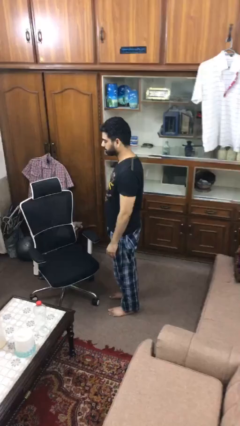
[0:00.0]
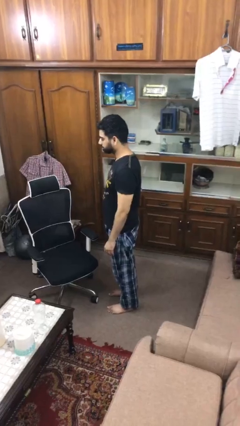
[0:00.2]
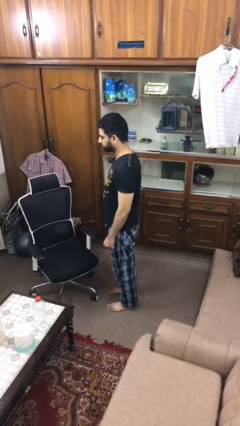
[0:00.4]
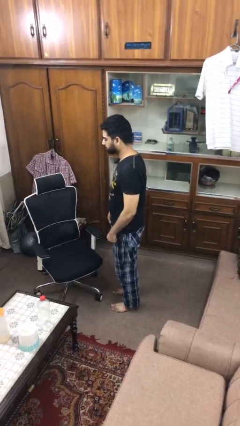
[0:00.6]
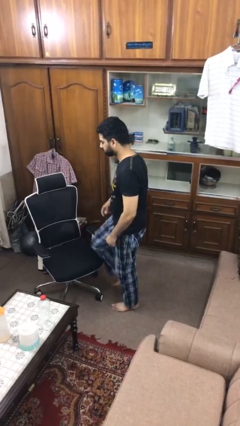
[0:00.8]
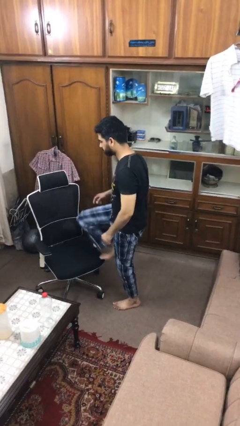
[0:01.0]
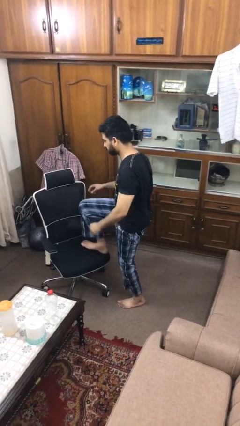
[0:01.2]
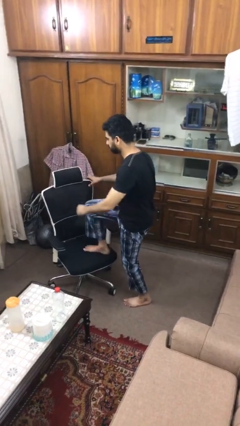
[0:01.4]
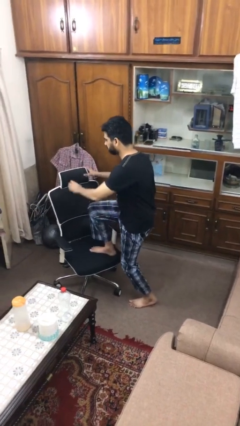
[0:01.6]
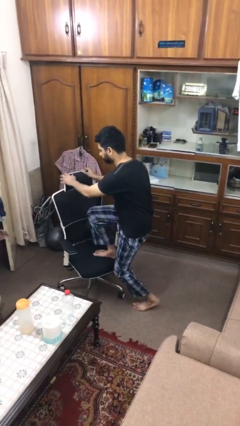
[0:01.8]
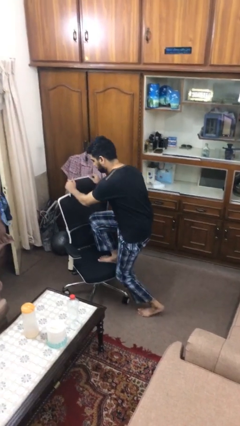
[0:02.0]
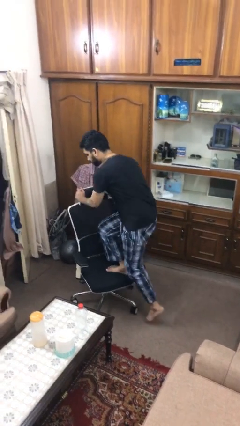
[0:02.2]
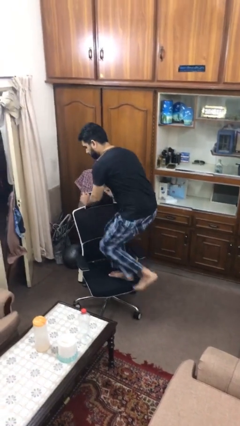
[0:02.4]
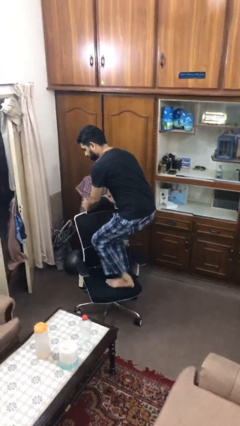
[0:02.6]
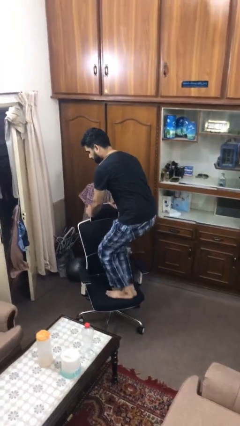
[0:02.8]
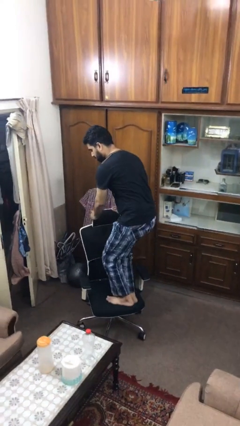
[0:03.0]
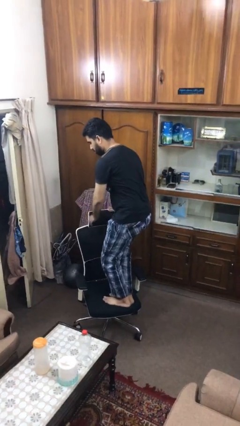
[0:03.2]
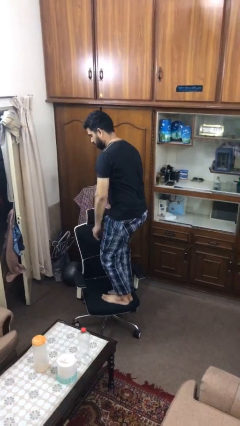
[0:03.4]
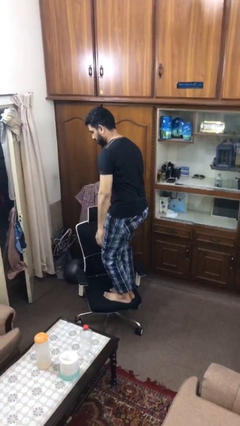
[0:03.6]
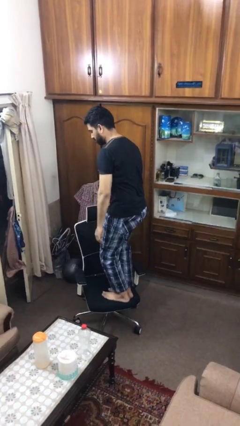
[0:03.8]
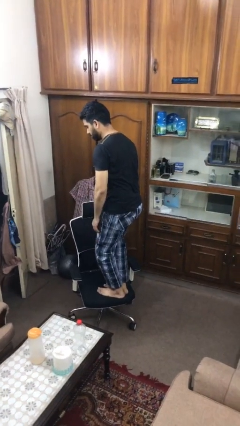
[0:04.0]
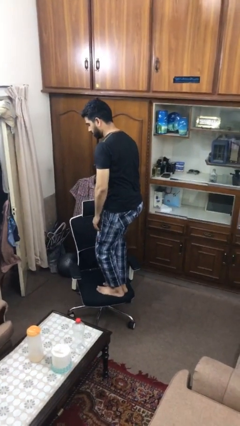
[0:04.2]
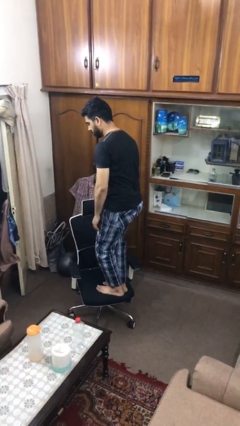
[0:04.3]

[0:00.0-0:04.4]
person climbs on chair

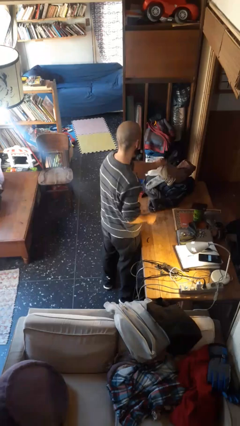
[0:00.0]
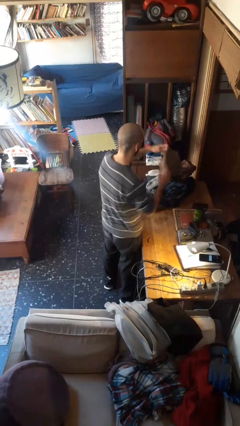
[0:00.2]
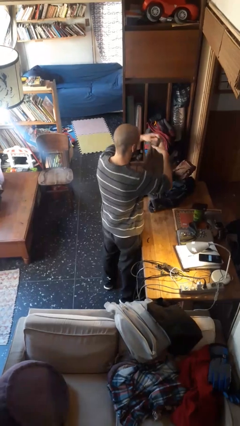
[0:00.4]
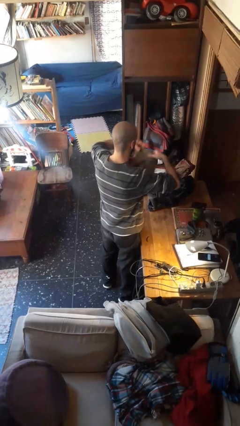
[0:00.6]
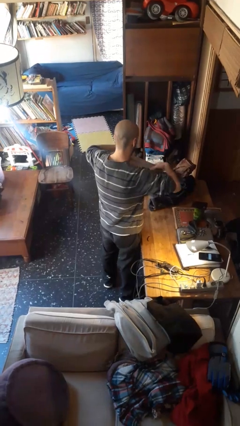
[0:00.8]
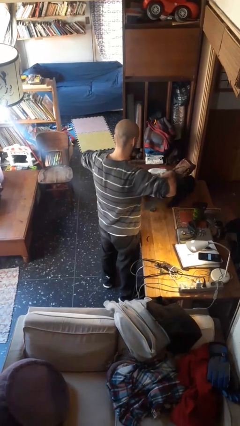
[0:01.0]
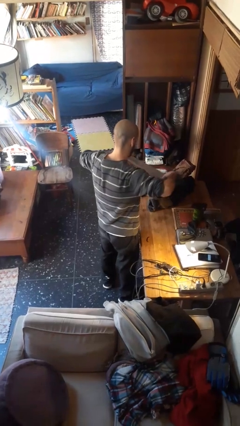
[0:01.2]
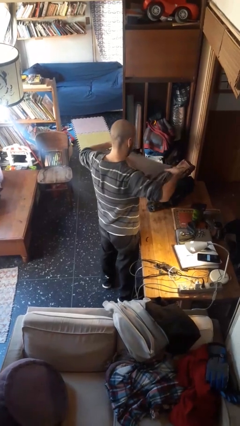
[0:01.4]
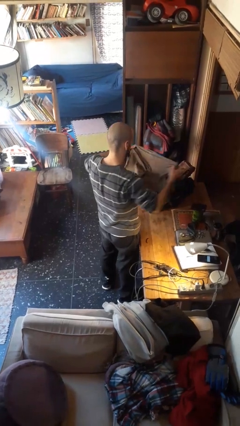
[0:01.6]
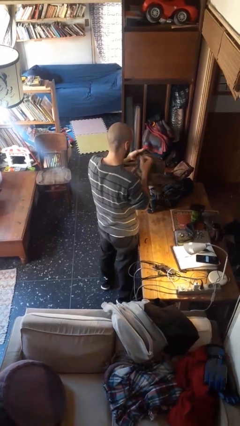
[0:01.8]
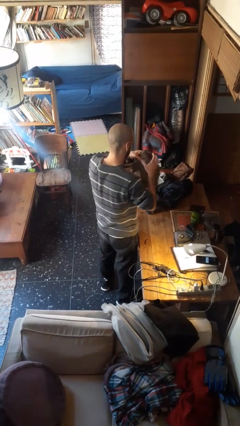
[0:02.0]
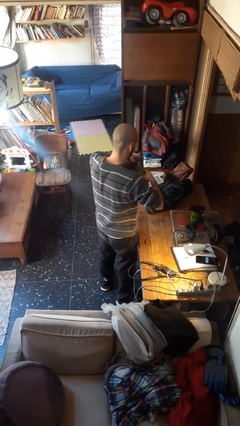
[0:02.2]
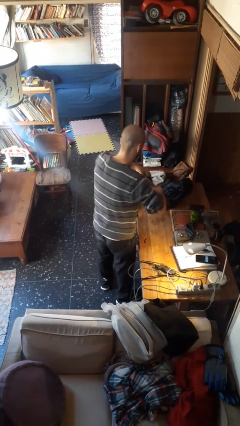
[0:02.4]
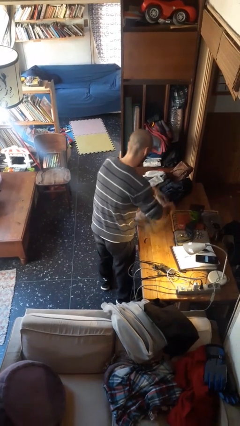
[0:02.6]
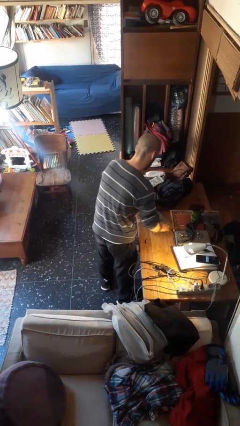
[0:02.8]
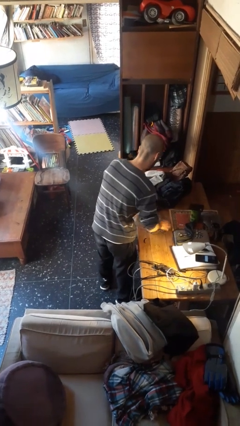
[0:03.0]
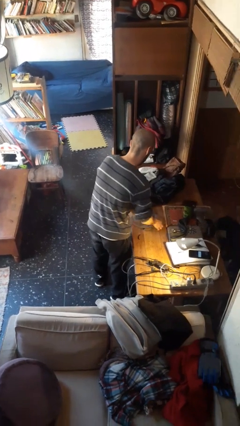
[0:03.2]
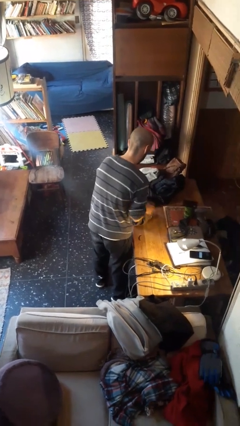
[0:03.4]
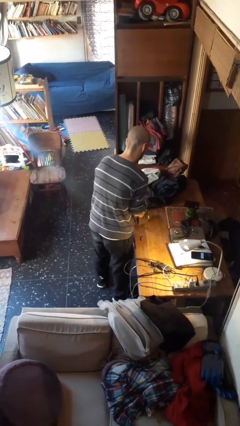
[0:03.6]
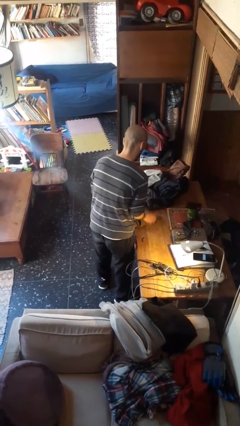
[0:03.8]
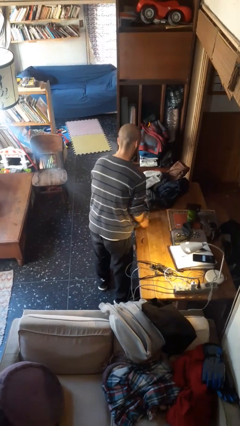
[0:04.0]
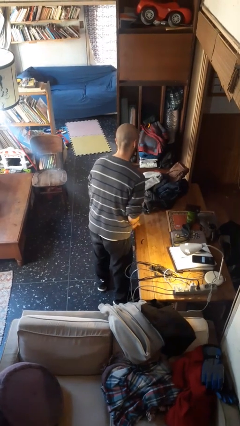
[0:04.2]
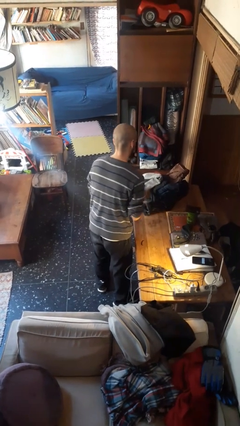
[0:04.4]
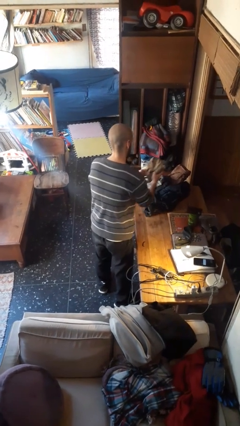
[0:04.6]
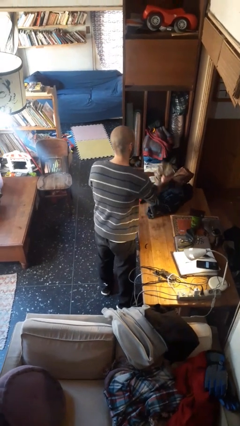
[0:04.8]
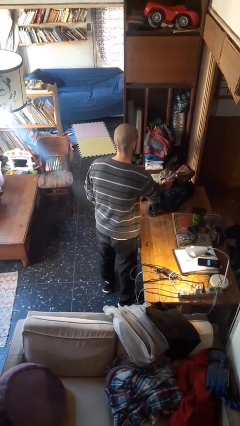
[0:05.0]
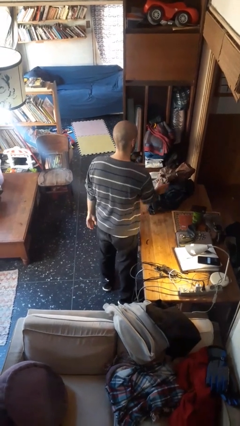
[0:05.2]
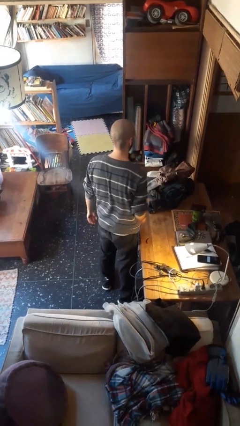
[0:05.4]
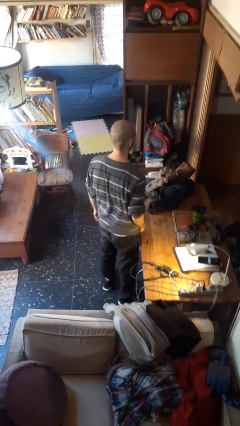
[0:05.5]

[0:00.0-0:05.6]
person folds shirt

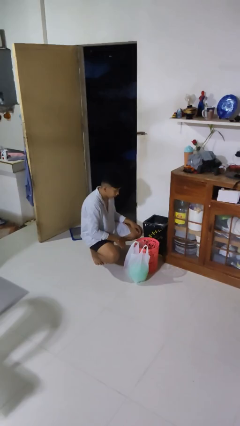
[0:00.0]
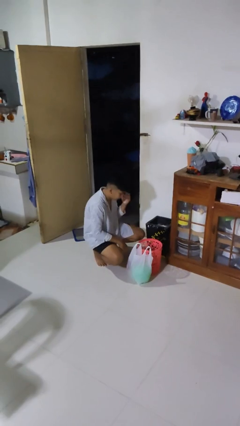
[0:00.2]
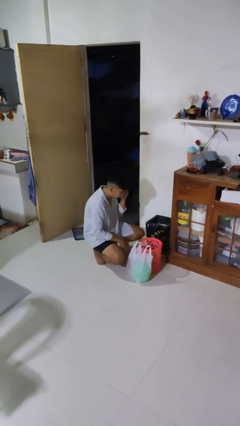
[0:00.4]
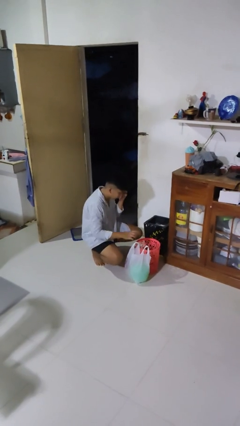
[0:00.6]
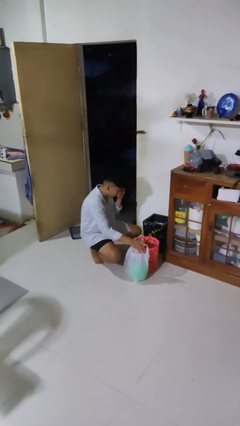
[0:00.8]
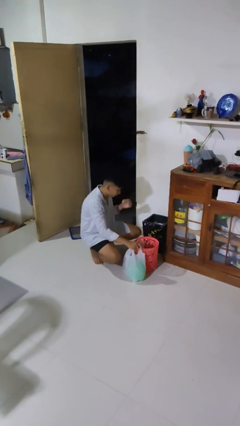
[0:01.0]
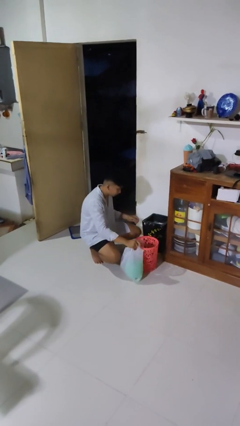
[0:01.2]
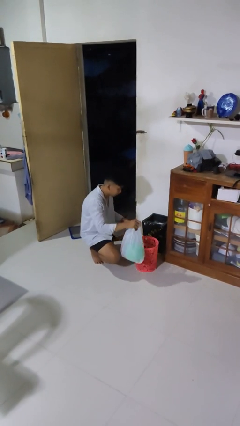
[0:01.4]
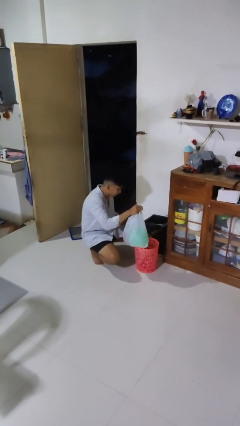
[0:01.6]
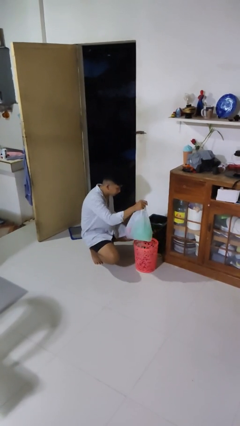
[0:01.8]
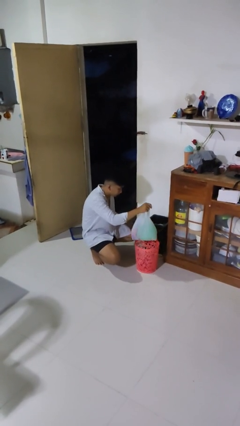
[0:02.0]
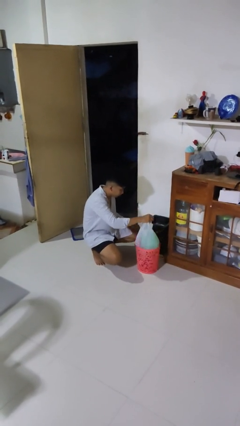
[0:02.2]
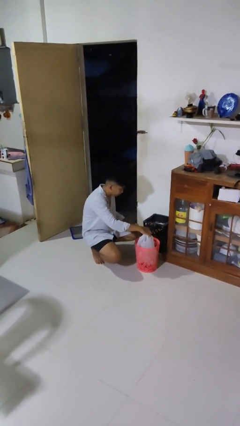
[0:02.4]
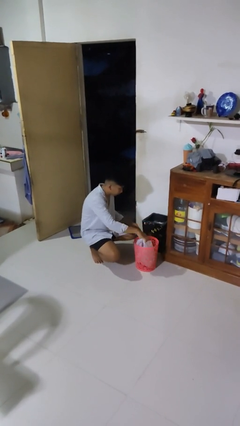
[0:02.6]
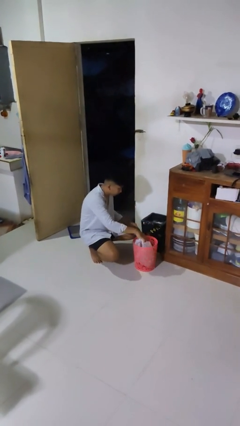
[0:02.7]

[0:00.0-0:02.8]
person inserts trashbag into trashcan

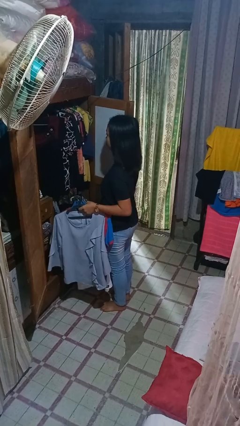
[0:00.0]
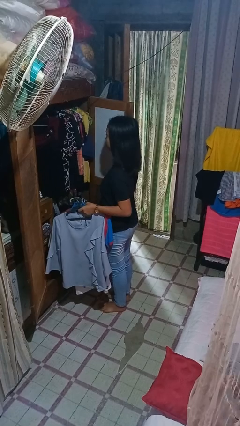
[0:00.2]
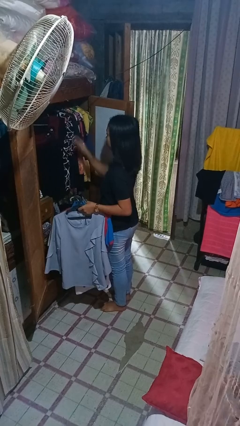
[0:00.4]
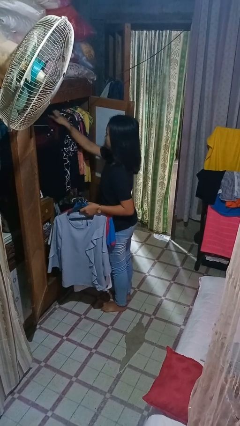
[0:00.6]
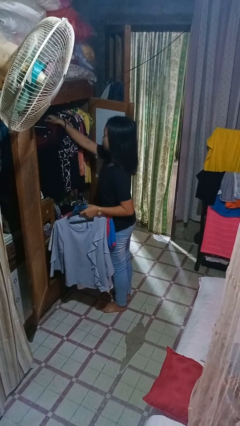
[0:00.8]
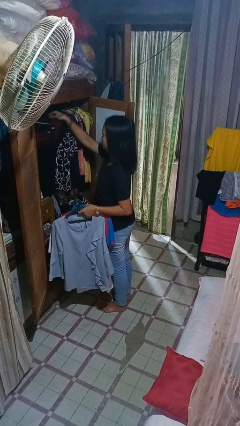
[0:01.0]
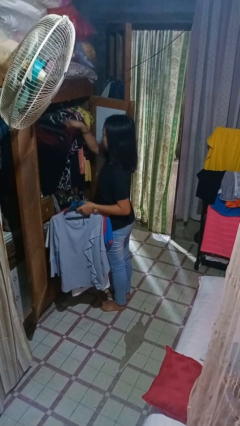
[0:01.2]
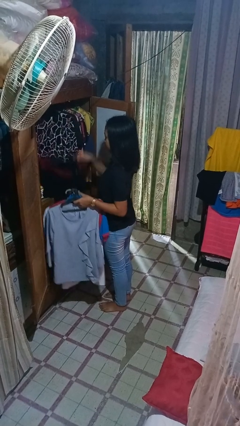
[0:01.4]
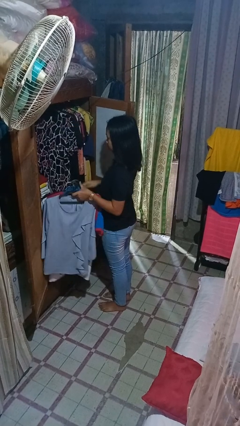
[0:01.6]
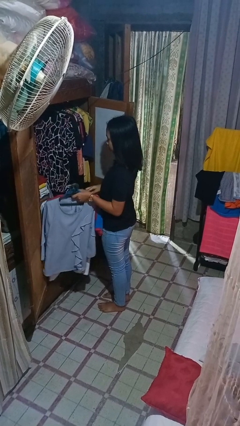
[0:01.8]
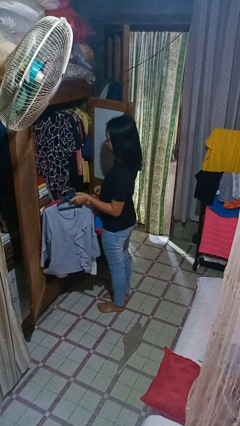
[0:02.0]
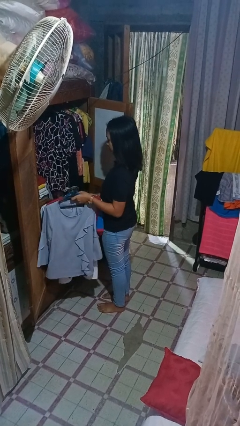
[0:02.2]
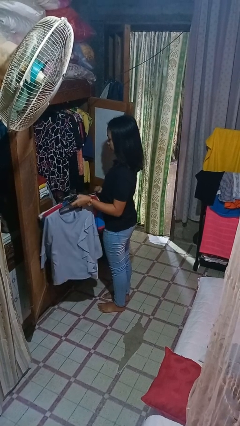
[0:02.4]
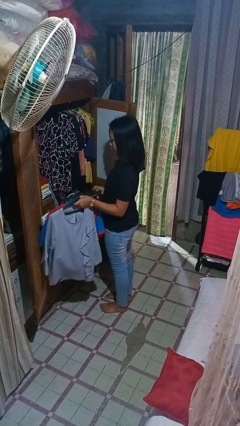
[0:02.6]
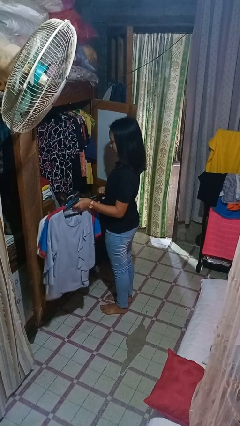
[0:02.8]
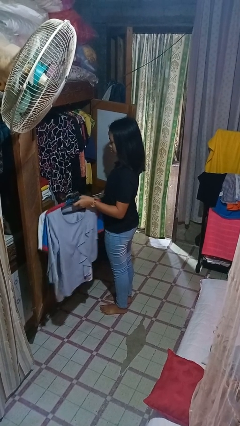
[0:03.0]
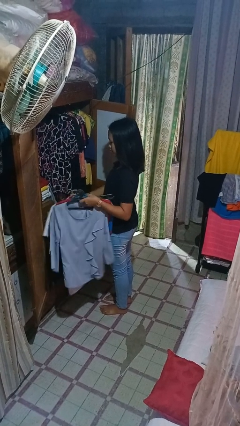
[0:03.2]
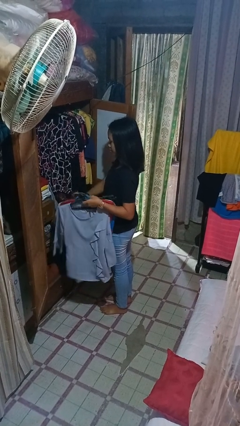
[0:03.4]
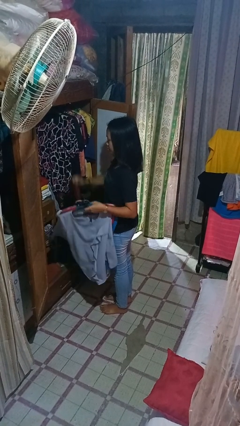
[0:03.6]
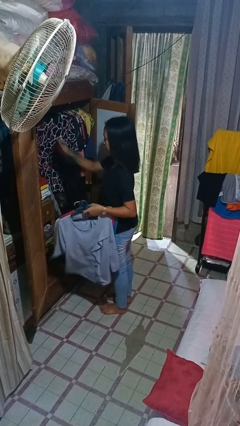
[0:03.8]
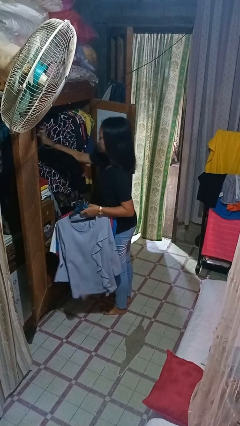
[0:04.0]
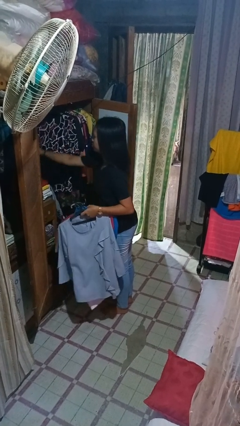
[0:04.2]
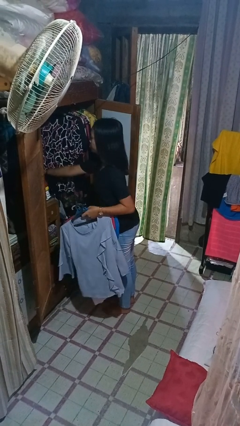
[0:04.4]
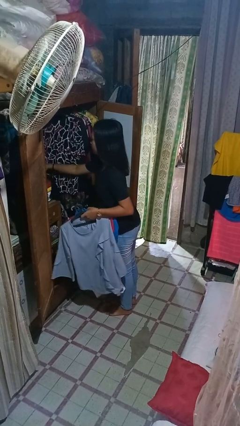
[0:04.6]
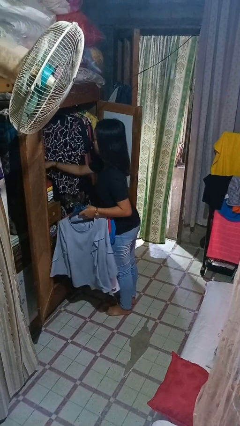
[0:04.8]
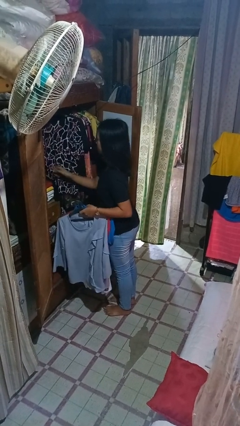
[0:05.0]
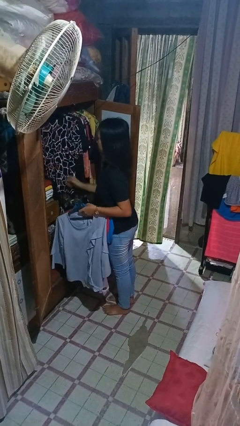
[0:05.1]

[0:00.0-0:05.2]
person takes clothes from closet
